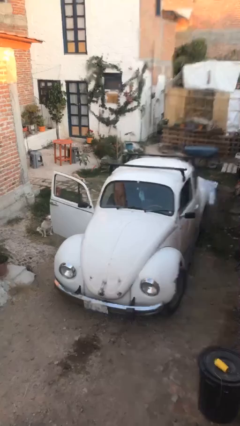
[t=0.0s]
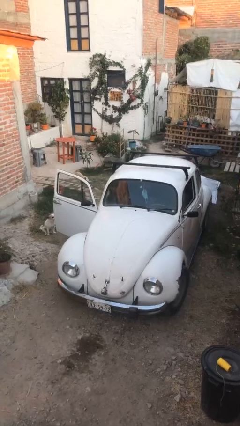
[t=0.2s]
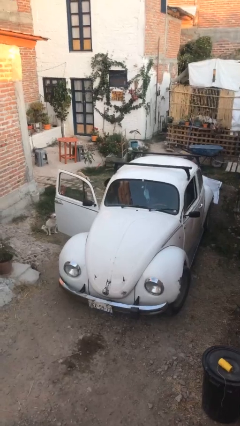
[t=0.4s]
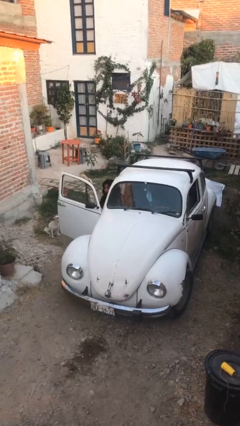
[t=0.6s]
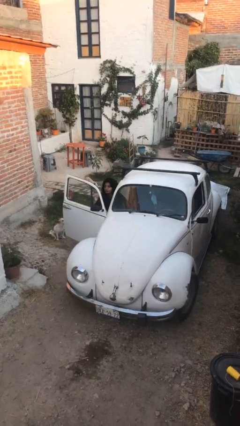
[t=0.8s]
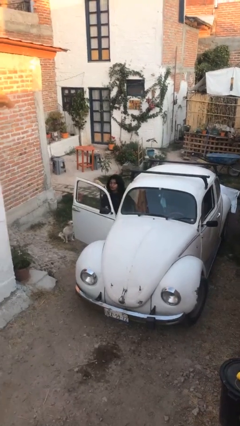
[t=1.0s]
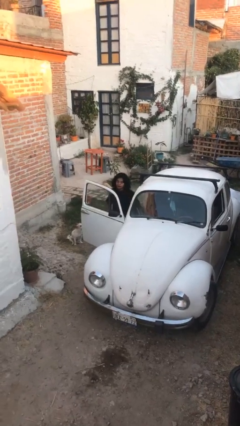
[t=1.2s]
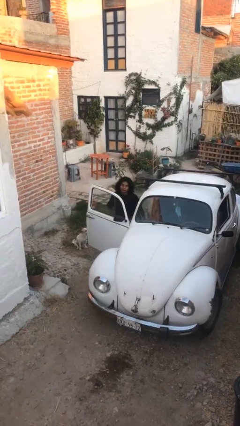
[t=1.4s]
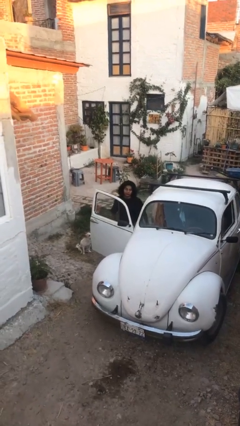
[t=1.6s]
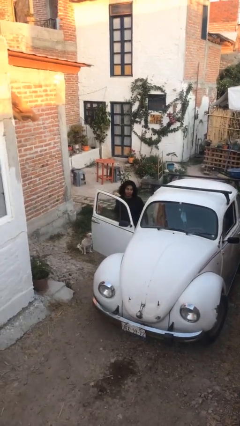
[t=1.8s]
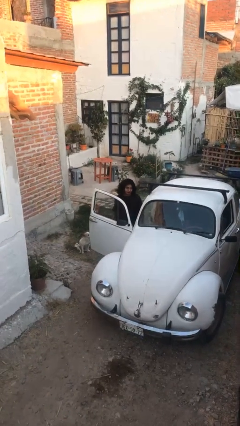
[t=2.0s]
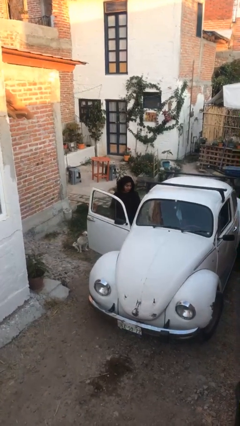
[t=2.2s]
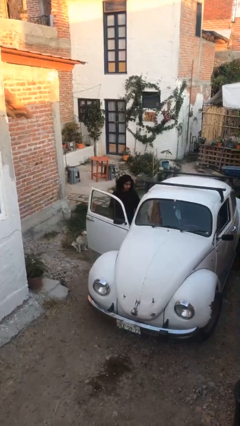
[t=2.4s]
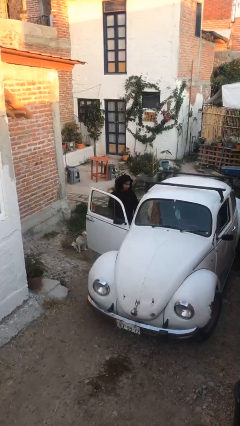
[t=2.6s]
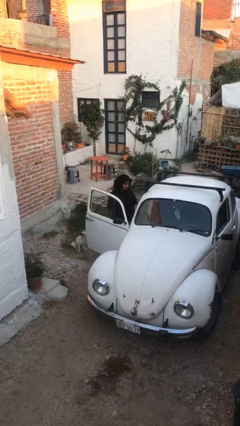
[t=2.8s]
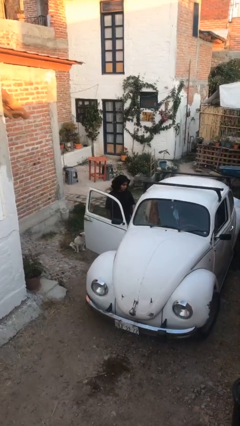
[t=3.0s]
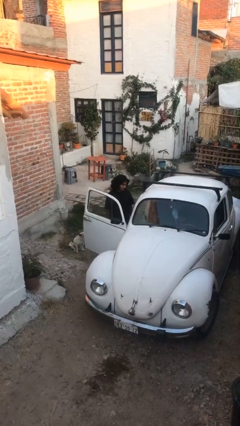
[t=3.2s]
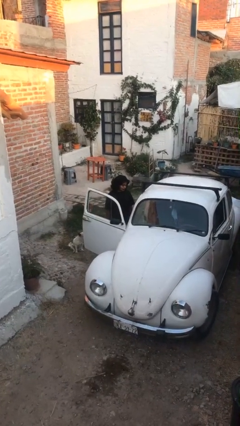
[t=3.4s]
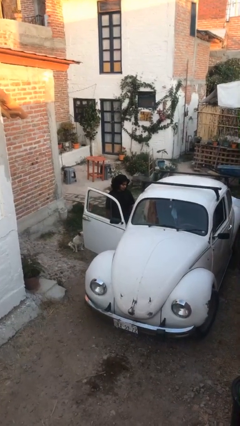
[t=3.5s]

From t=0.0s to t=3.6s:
person exits car

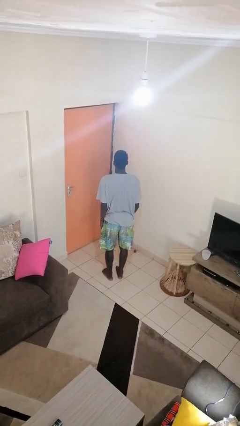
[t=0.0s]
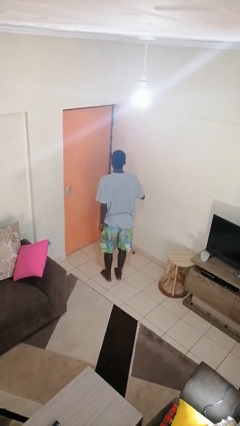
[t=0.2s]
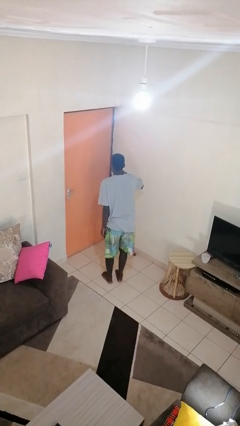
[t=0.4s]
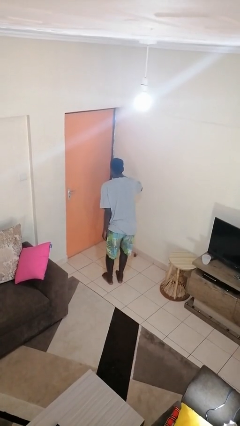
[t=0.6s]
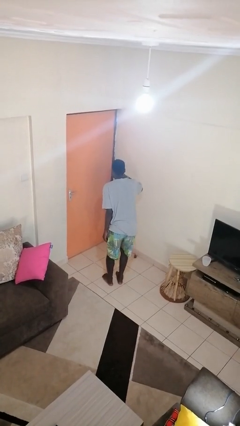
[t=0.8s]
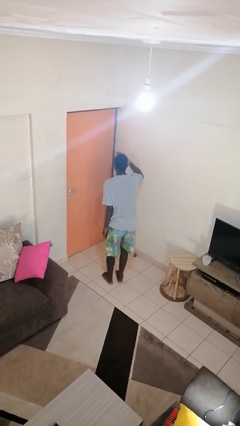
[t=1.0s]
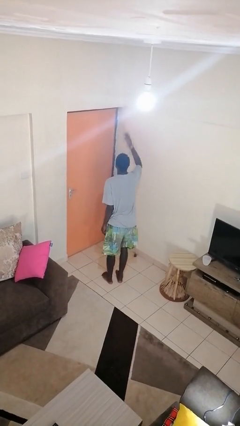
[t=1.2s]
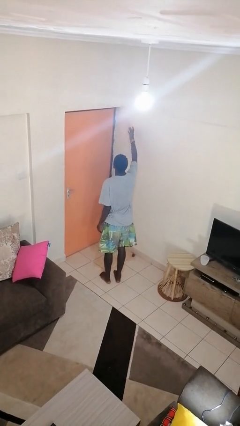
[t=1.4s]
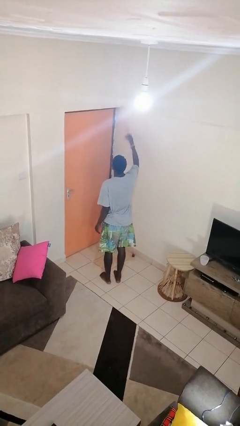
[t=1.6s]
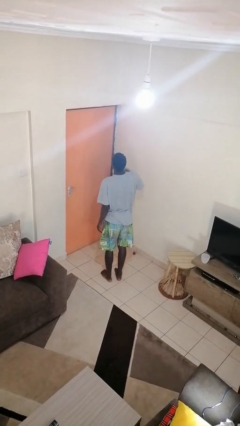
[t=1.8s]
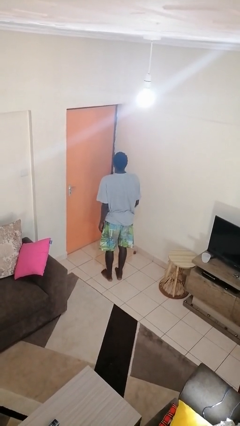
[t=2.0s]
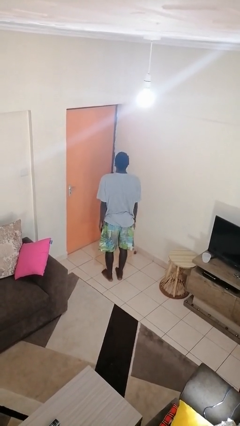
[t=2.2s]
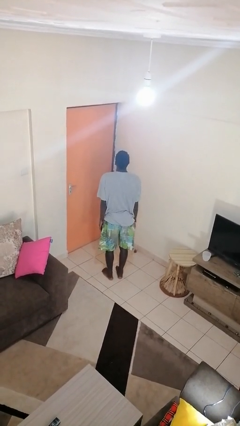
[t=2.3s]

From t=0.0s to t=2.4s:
person gestures blow kiss

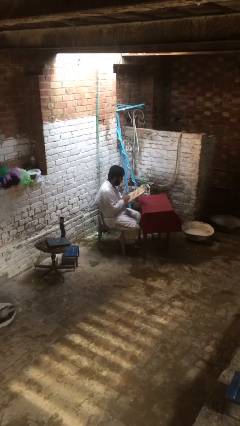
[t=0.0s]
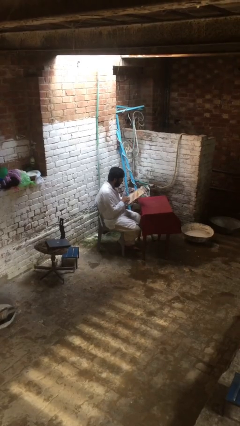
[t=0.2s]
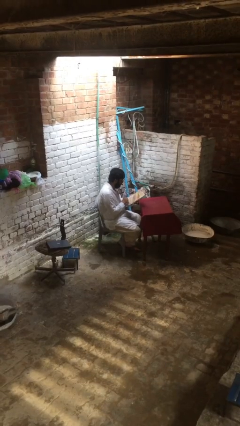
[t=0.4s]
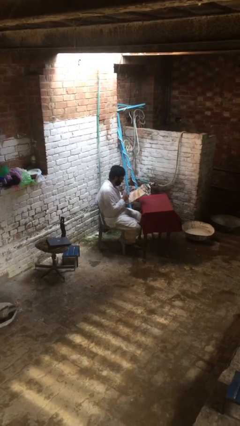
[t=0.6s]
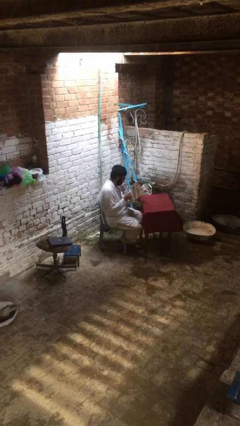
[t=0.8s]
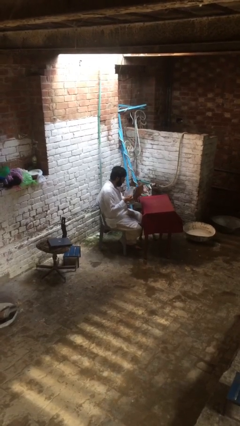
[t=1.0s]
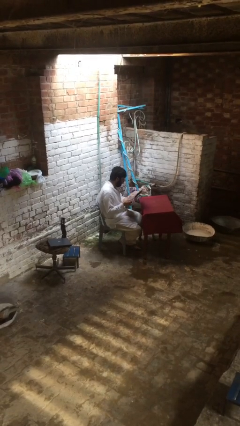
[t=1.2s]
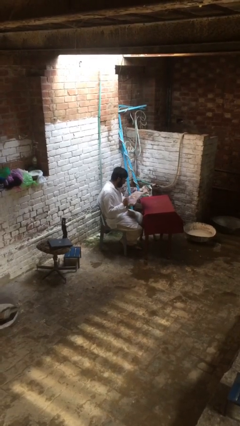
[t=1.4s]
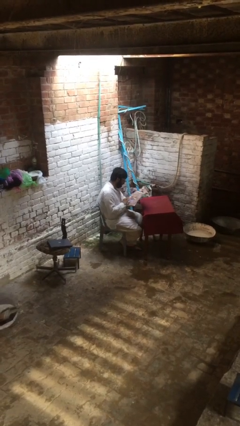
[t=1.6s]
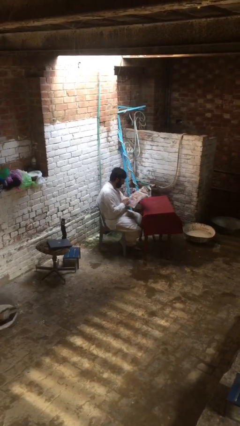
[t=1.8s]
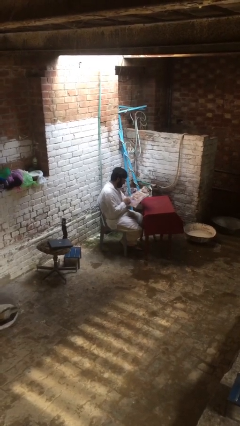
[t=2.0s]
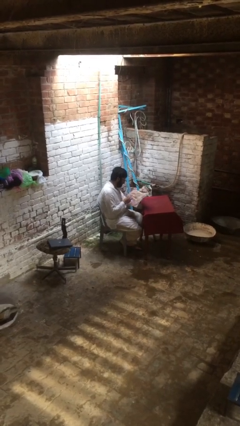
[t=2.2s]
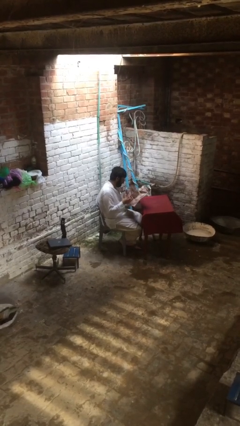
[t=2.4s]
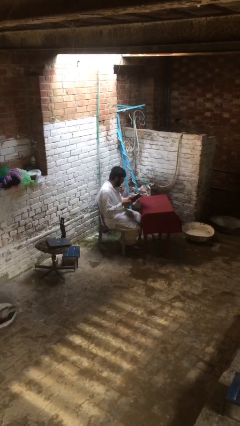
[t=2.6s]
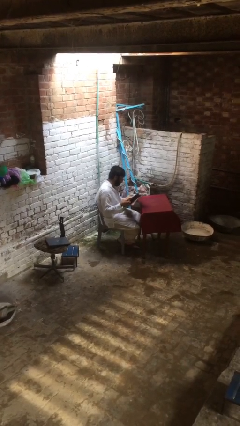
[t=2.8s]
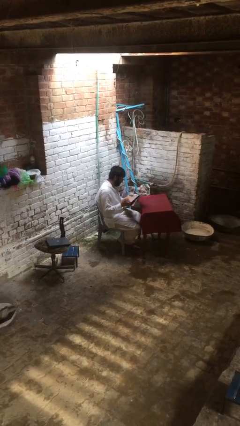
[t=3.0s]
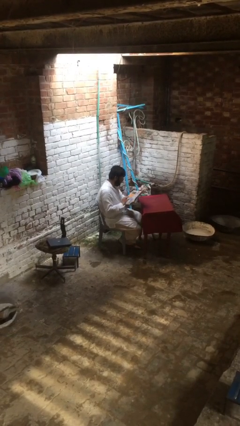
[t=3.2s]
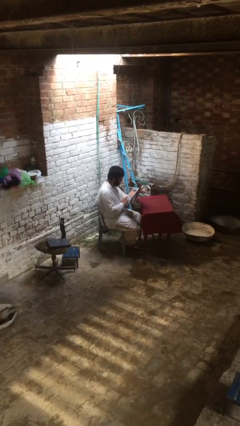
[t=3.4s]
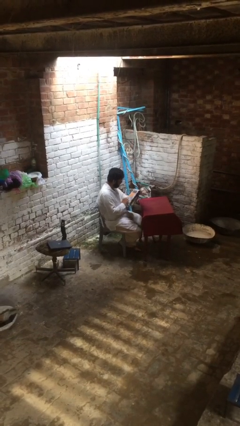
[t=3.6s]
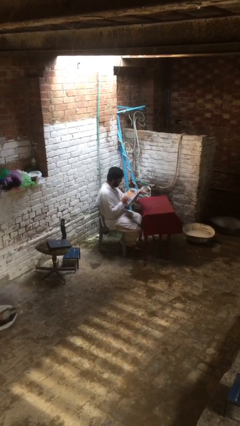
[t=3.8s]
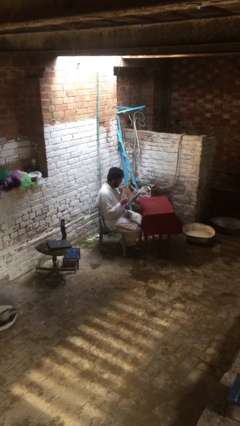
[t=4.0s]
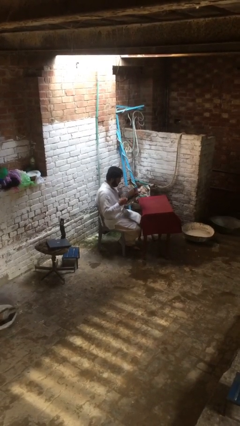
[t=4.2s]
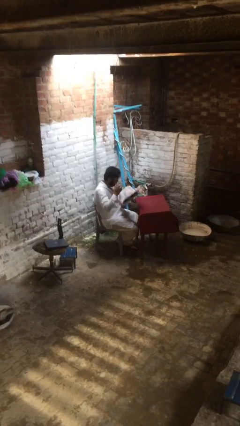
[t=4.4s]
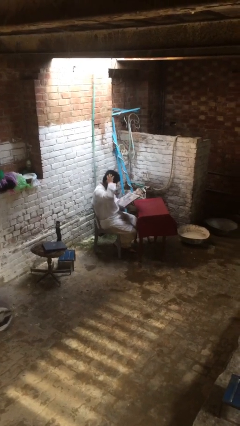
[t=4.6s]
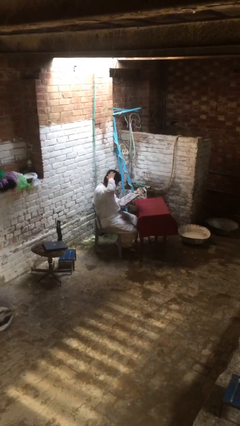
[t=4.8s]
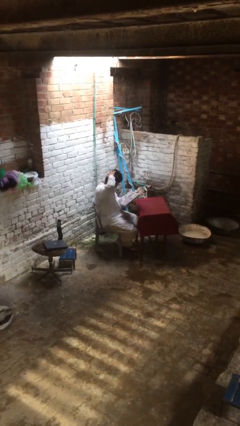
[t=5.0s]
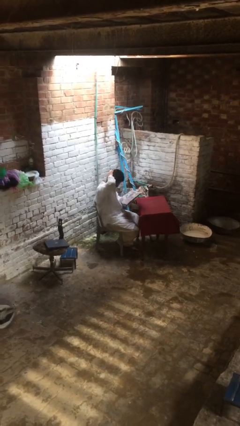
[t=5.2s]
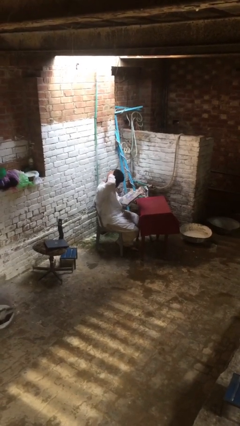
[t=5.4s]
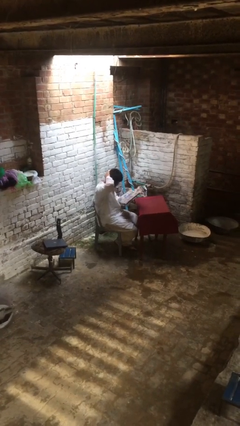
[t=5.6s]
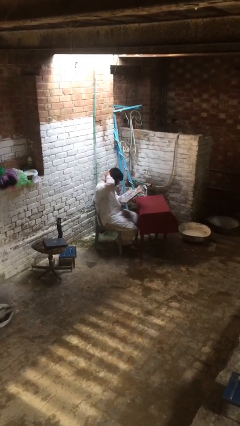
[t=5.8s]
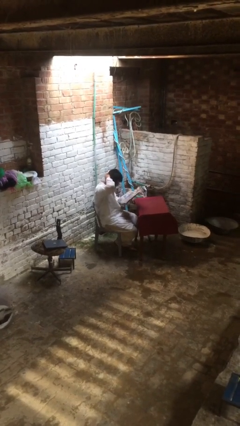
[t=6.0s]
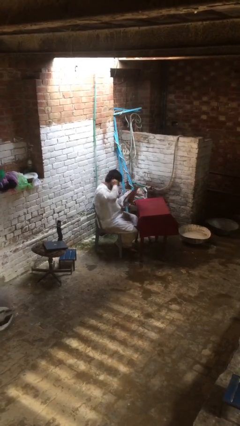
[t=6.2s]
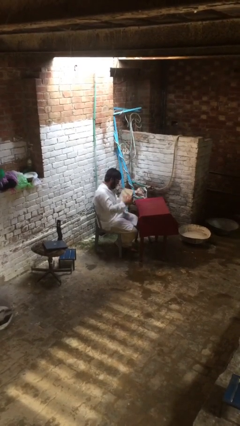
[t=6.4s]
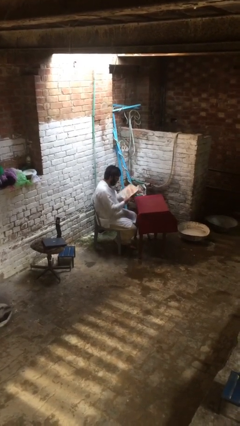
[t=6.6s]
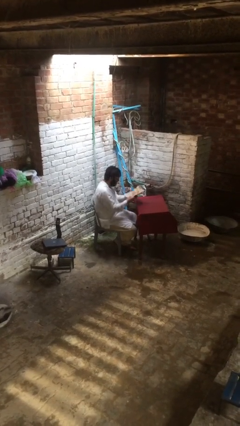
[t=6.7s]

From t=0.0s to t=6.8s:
person reads document

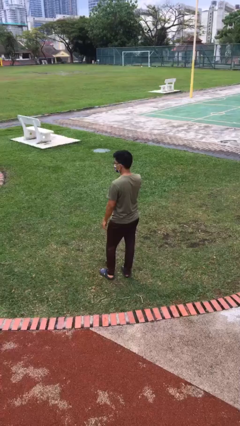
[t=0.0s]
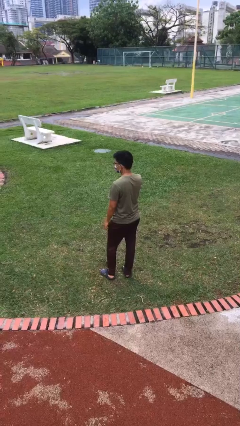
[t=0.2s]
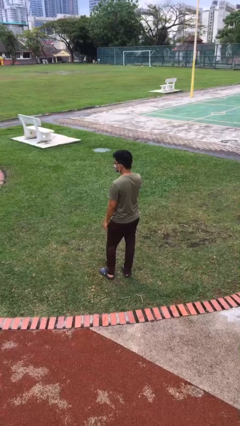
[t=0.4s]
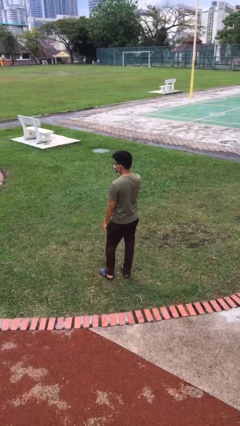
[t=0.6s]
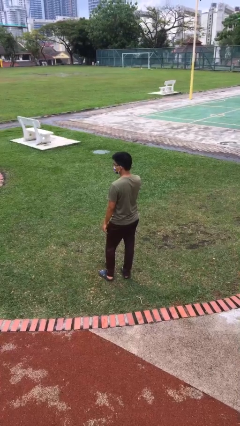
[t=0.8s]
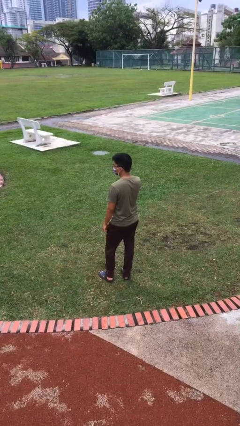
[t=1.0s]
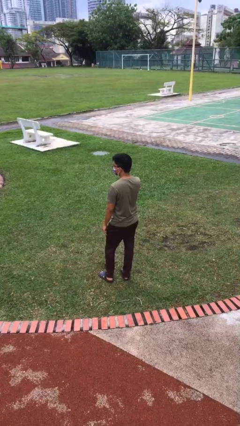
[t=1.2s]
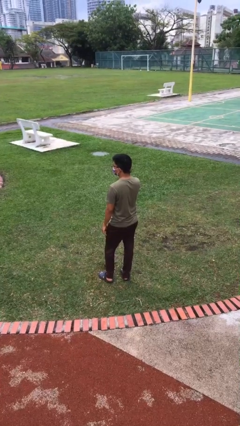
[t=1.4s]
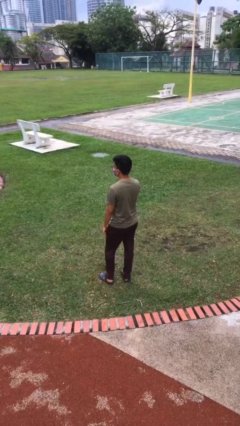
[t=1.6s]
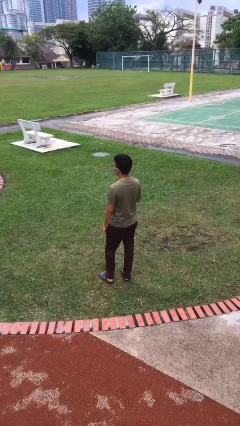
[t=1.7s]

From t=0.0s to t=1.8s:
person touches earlobe

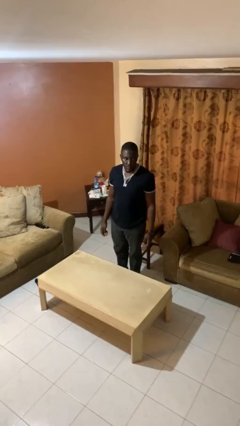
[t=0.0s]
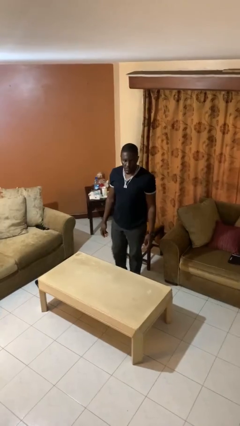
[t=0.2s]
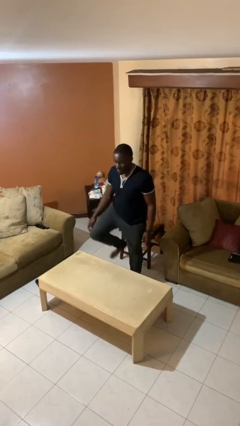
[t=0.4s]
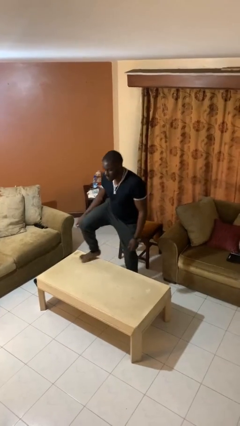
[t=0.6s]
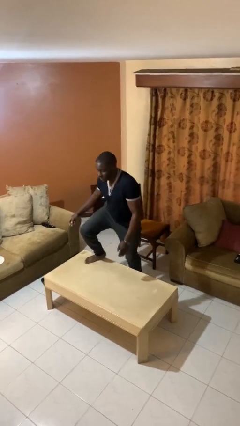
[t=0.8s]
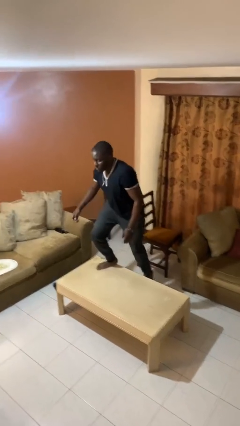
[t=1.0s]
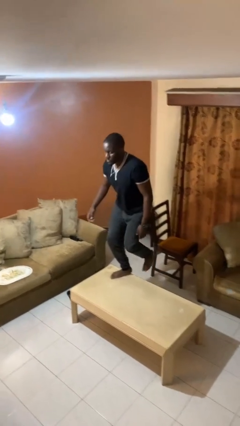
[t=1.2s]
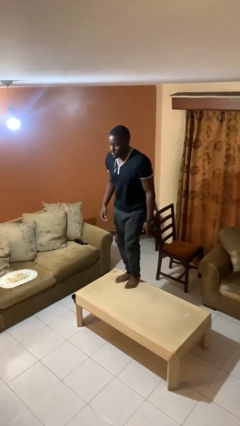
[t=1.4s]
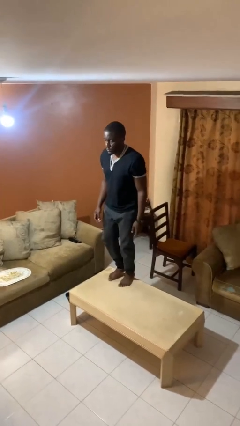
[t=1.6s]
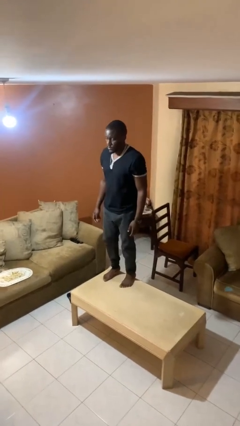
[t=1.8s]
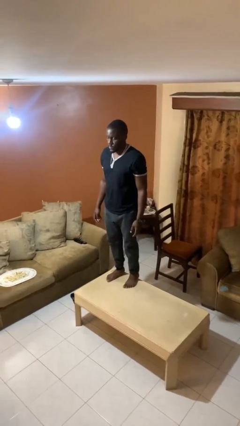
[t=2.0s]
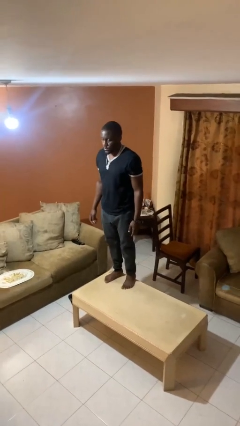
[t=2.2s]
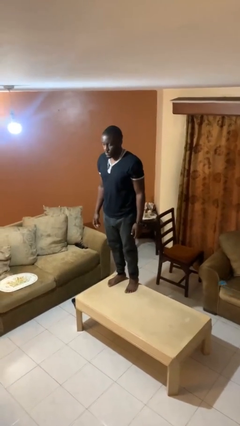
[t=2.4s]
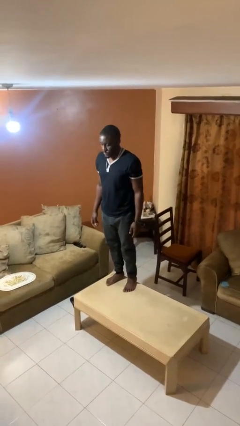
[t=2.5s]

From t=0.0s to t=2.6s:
person climbs on table

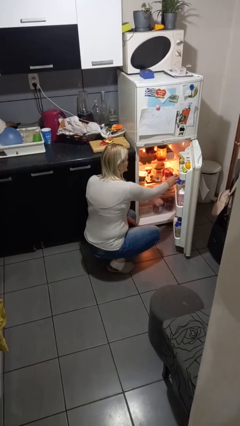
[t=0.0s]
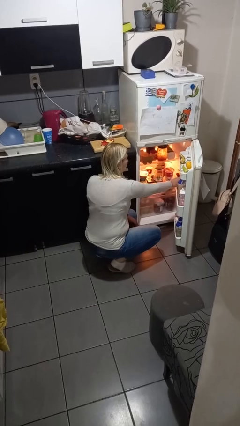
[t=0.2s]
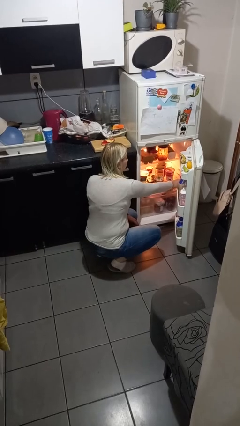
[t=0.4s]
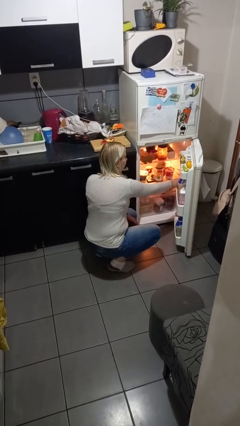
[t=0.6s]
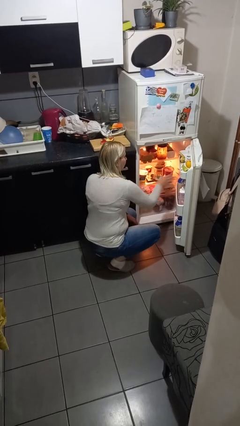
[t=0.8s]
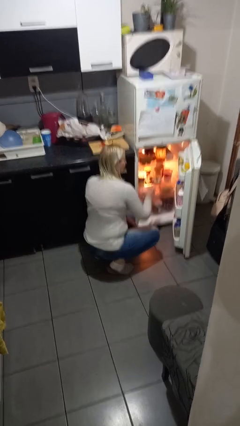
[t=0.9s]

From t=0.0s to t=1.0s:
person puts object into refrigerator
